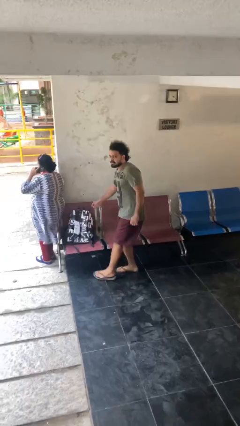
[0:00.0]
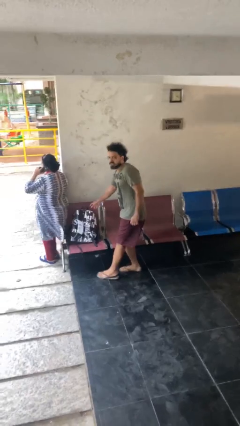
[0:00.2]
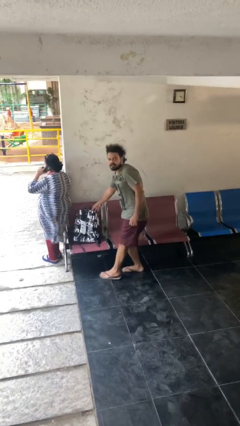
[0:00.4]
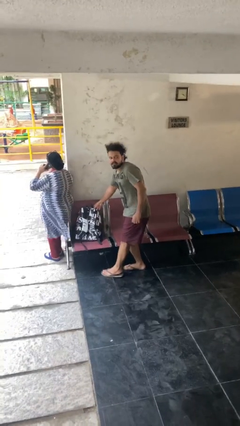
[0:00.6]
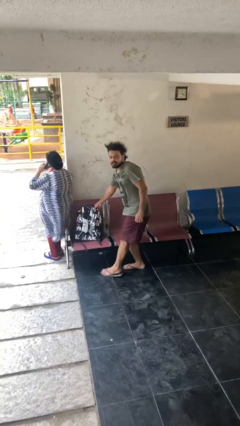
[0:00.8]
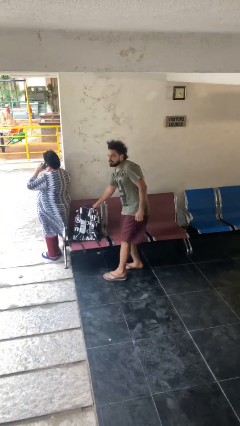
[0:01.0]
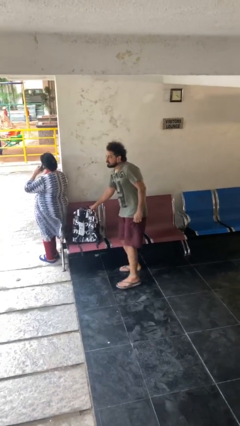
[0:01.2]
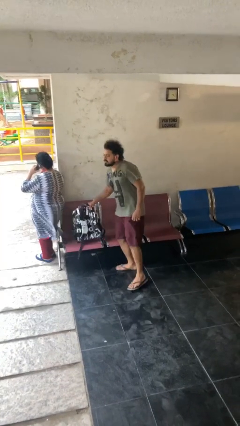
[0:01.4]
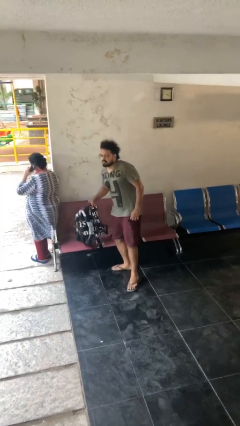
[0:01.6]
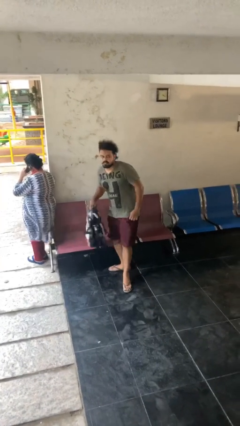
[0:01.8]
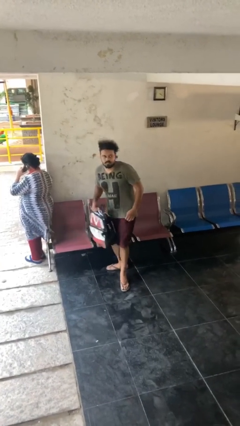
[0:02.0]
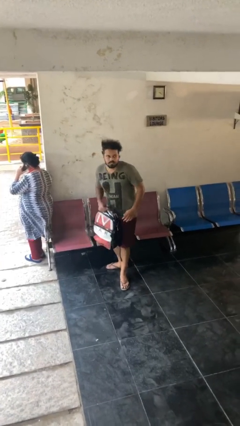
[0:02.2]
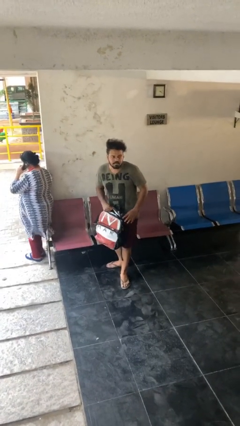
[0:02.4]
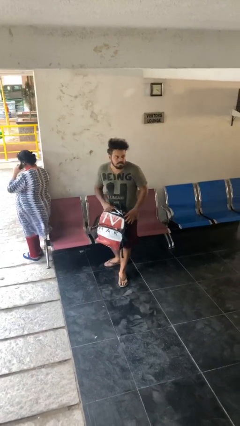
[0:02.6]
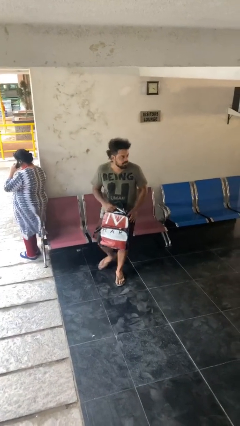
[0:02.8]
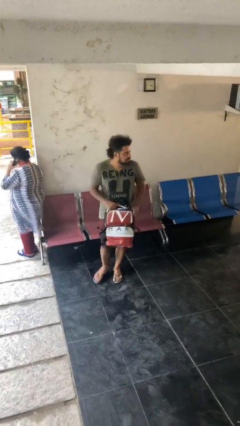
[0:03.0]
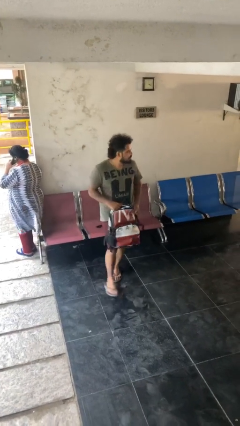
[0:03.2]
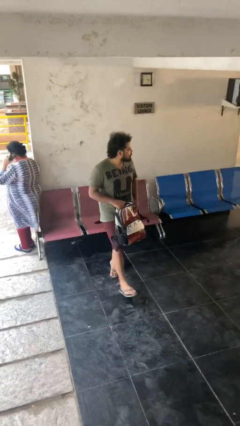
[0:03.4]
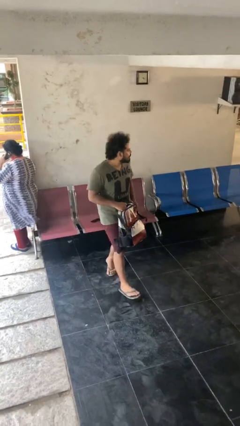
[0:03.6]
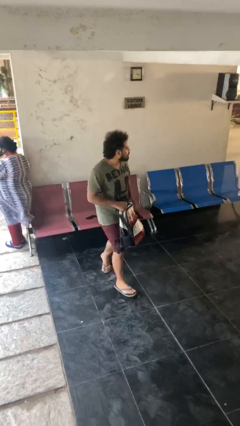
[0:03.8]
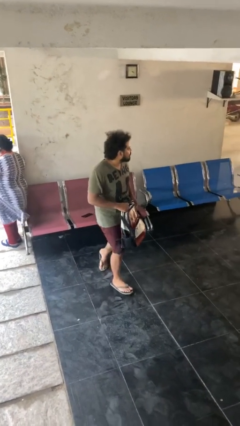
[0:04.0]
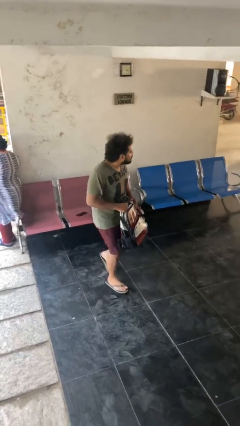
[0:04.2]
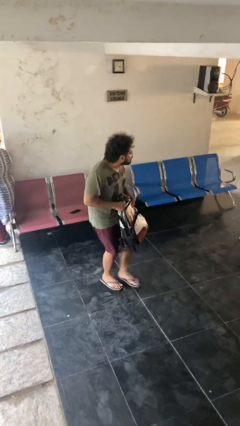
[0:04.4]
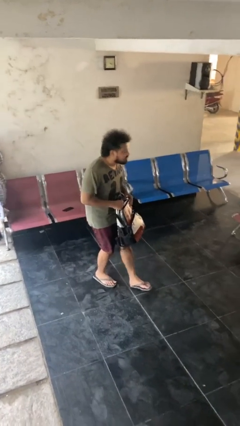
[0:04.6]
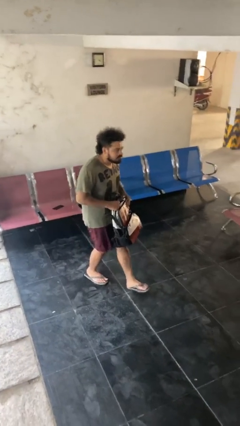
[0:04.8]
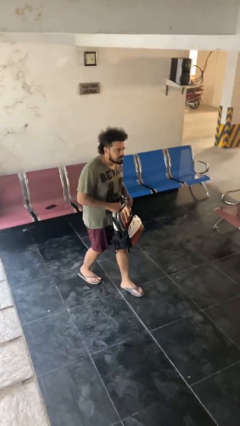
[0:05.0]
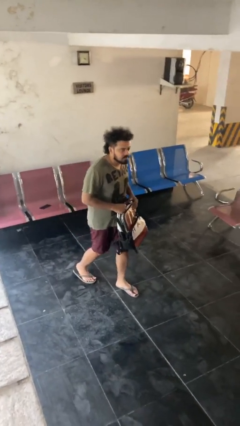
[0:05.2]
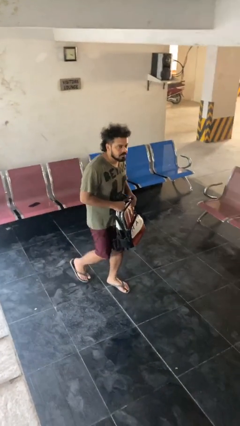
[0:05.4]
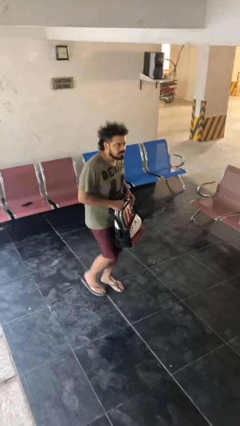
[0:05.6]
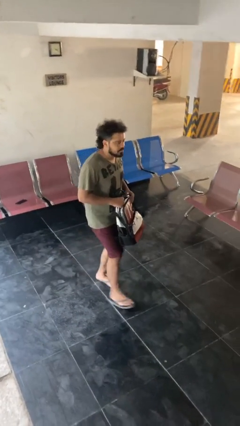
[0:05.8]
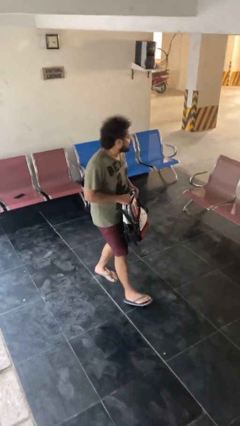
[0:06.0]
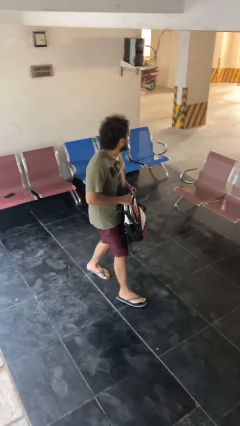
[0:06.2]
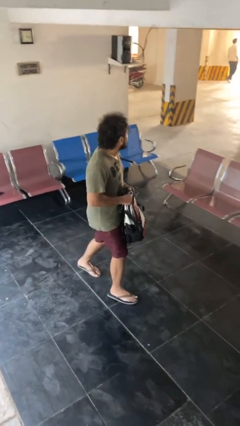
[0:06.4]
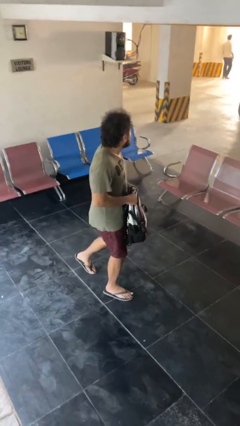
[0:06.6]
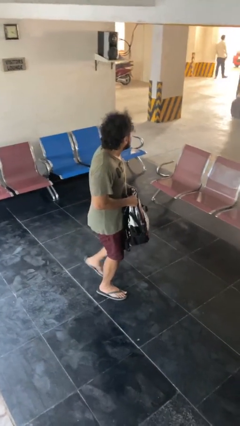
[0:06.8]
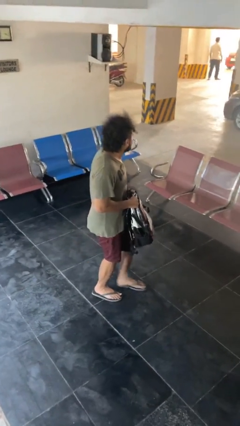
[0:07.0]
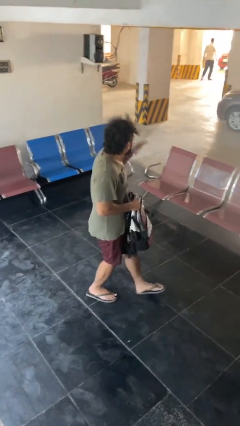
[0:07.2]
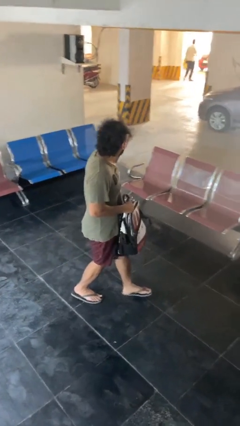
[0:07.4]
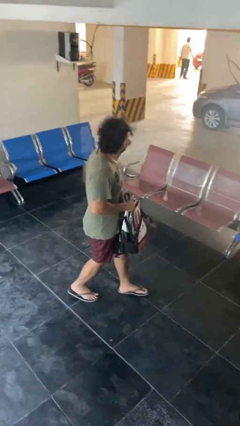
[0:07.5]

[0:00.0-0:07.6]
person steals object from person

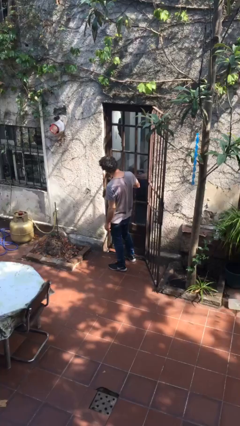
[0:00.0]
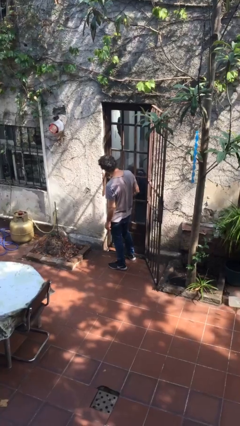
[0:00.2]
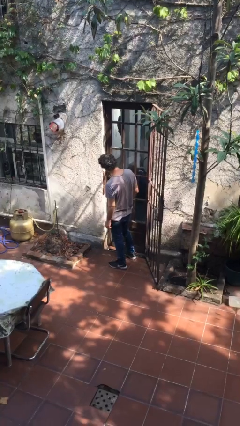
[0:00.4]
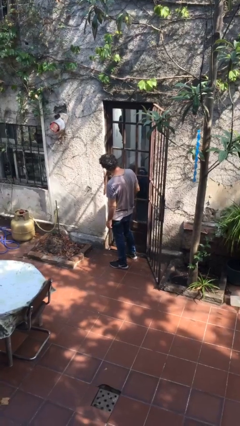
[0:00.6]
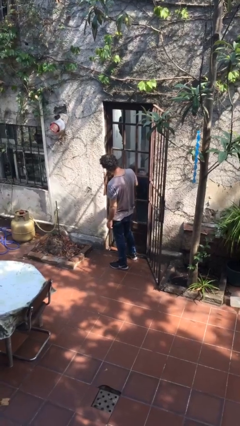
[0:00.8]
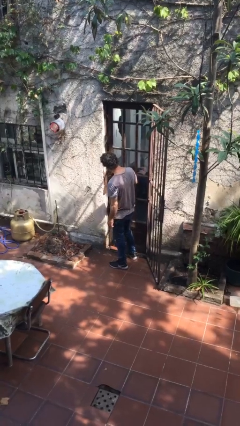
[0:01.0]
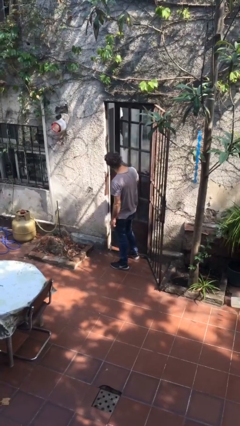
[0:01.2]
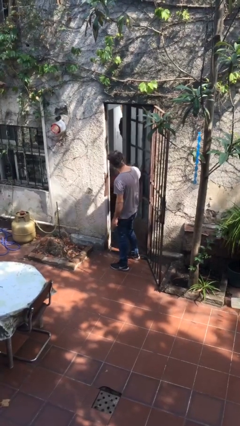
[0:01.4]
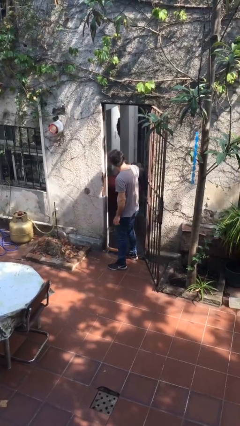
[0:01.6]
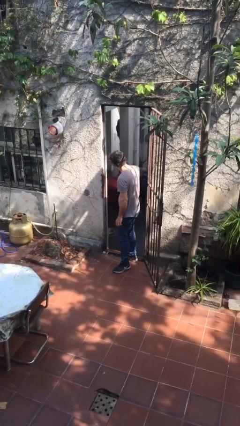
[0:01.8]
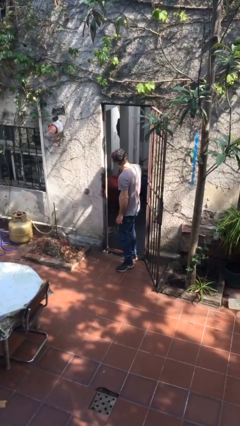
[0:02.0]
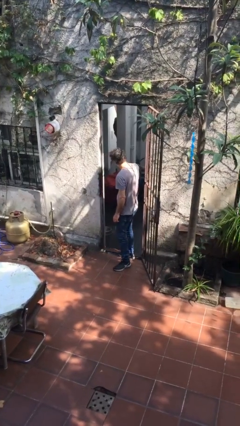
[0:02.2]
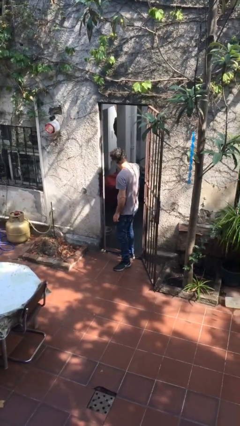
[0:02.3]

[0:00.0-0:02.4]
person opens facility door

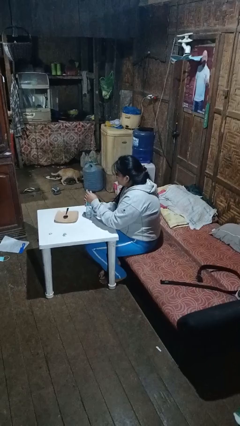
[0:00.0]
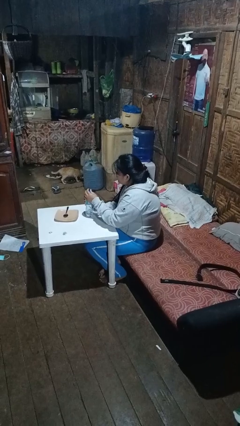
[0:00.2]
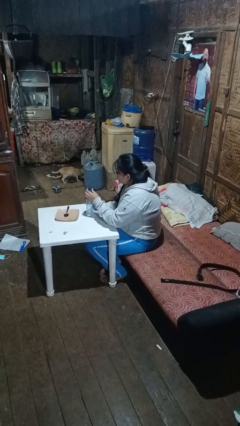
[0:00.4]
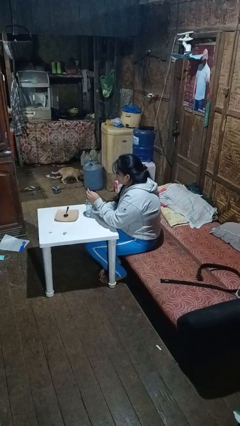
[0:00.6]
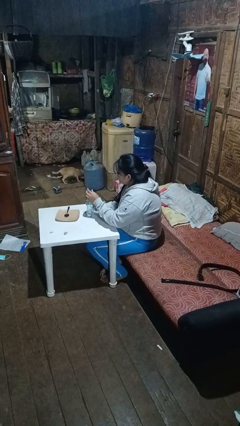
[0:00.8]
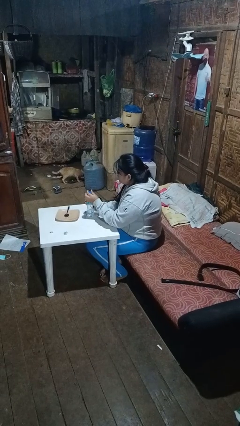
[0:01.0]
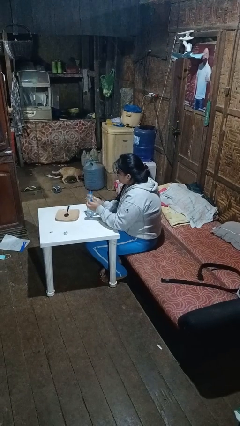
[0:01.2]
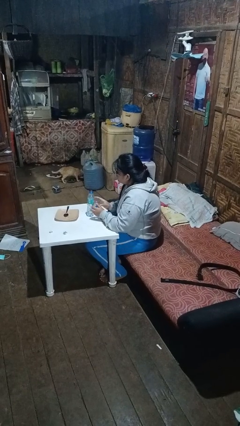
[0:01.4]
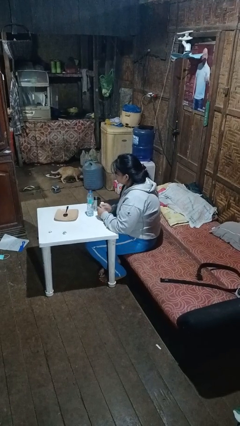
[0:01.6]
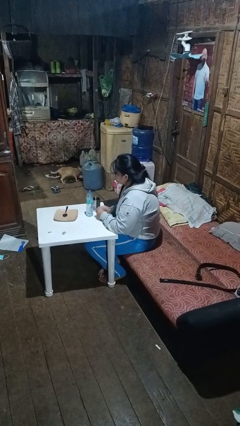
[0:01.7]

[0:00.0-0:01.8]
person unscrews lid from bottle

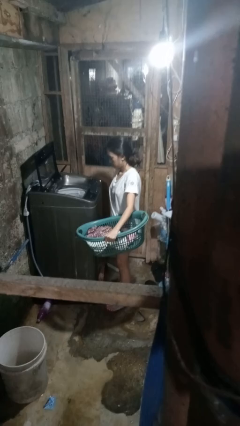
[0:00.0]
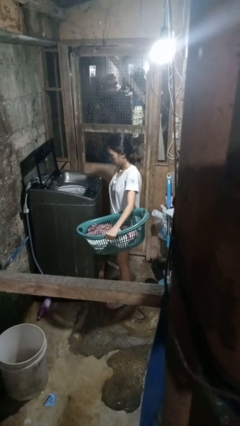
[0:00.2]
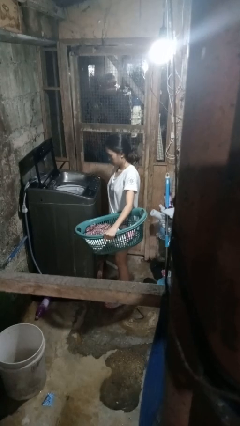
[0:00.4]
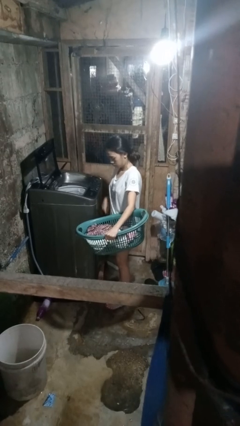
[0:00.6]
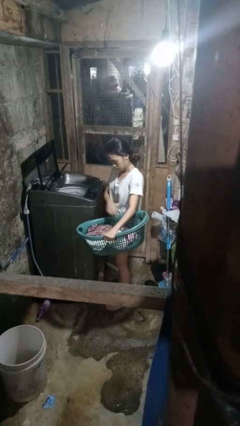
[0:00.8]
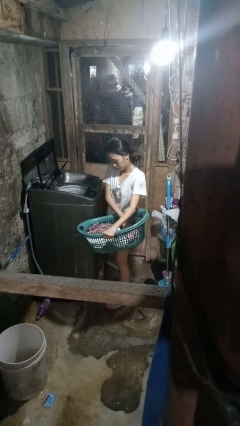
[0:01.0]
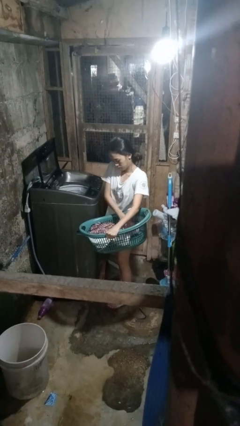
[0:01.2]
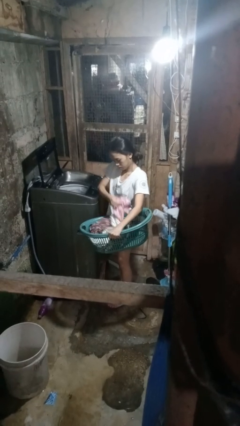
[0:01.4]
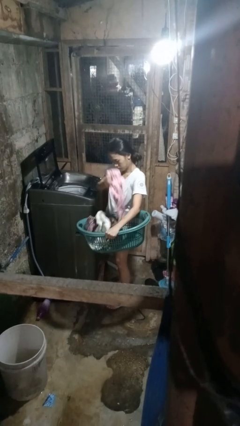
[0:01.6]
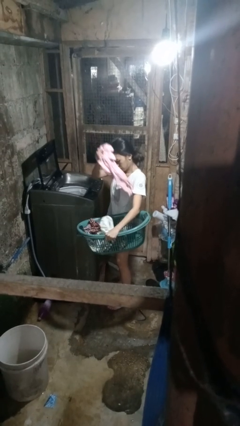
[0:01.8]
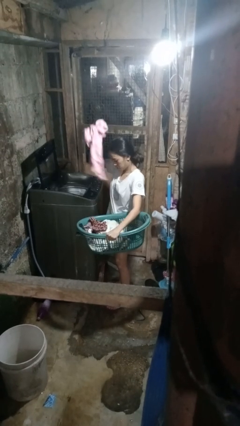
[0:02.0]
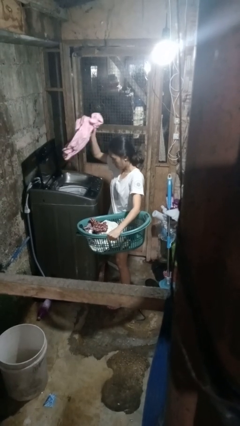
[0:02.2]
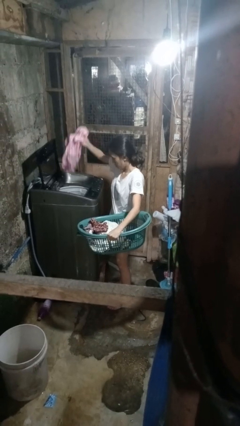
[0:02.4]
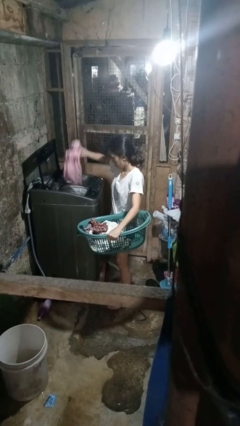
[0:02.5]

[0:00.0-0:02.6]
person loads clotheswasher

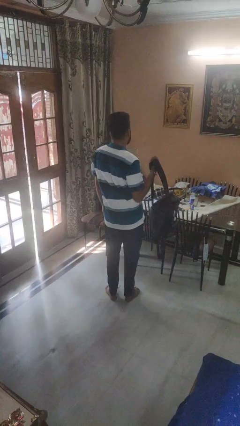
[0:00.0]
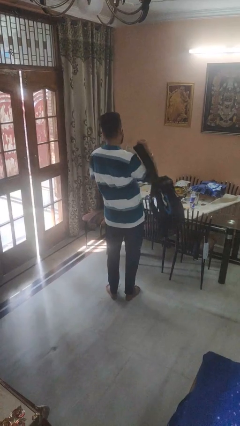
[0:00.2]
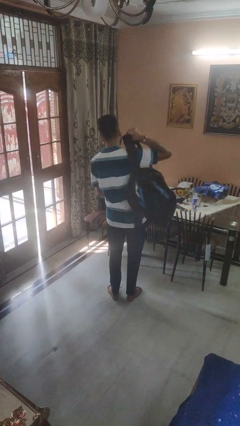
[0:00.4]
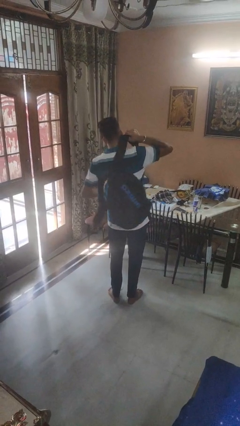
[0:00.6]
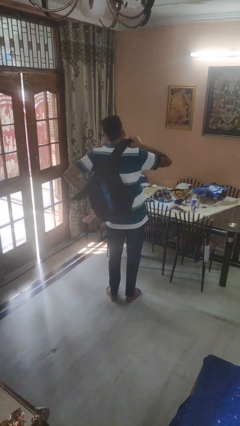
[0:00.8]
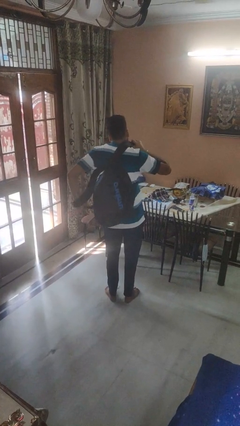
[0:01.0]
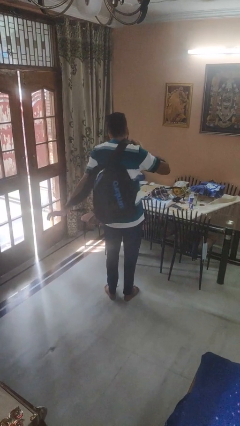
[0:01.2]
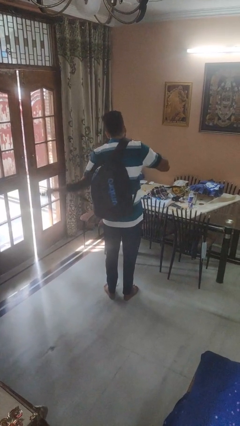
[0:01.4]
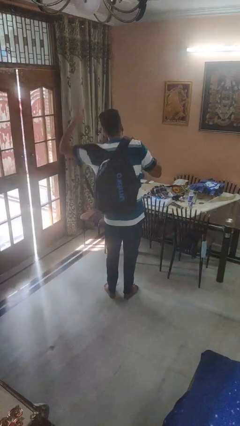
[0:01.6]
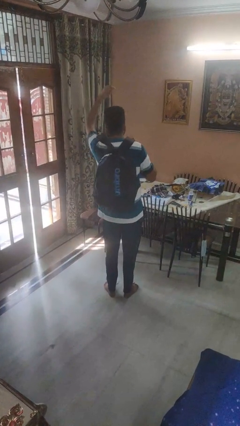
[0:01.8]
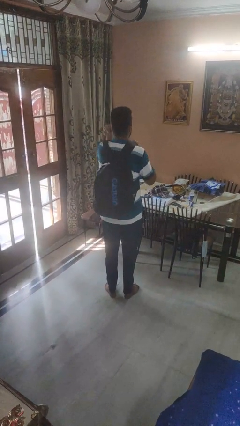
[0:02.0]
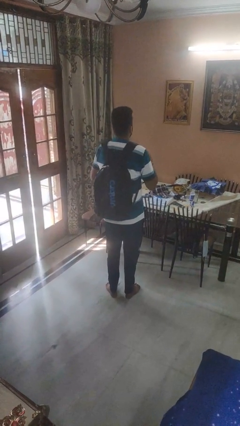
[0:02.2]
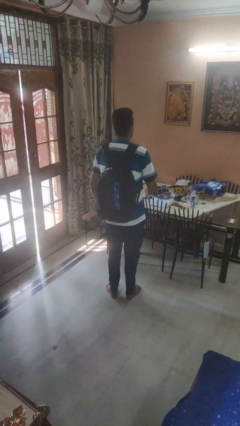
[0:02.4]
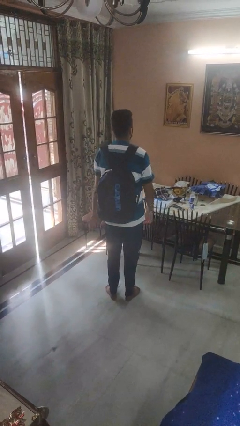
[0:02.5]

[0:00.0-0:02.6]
person puts on backpack
